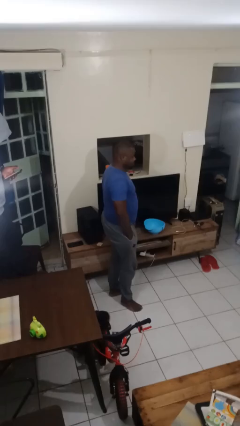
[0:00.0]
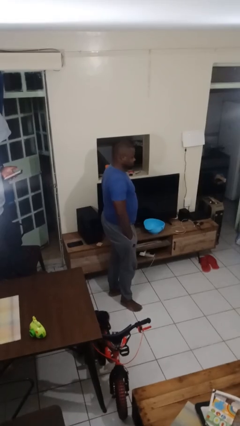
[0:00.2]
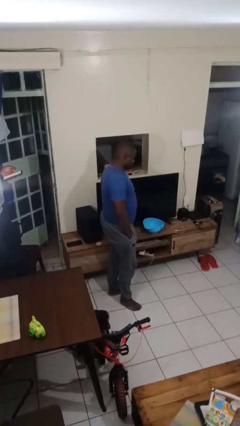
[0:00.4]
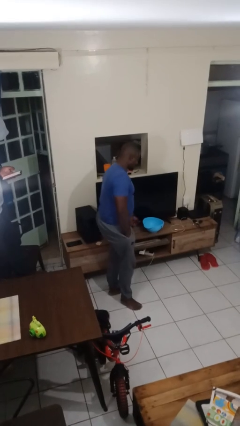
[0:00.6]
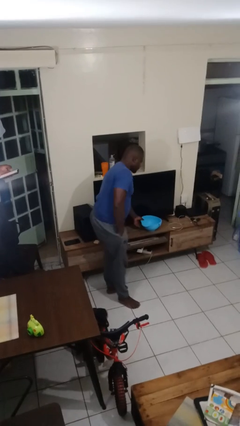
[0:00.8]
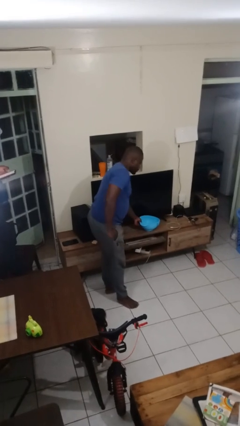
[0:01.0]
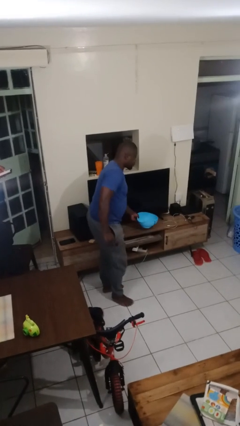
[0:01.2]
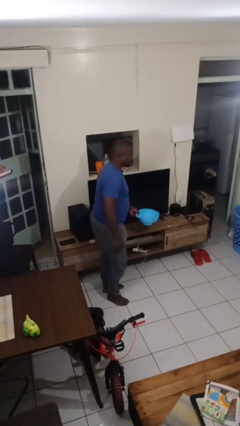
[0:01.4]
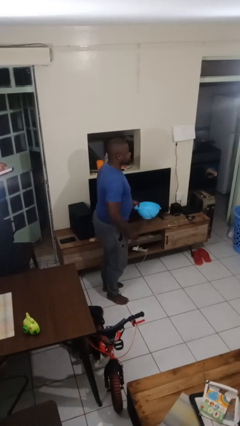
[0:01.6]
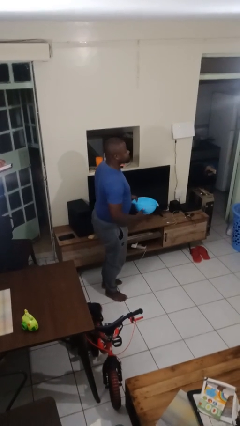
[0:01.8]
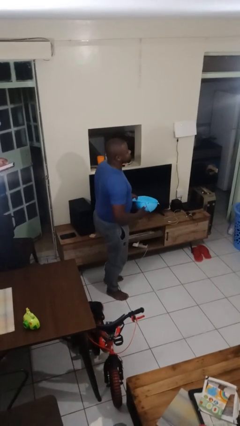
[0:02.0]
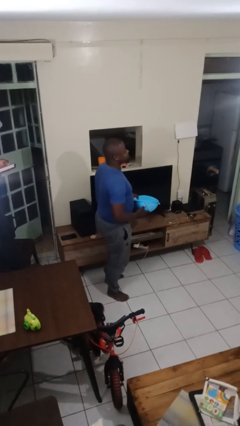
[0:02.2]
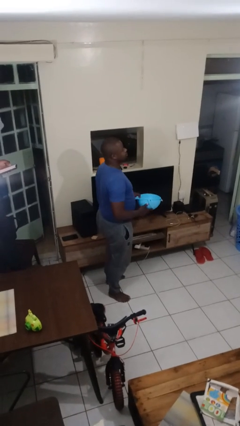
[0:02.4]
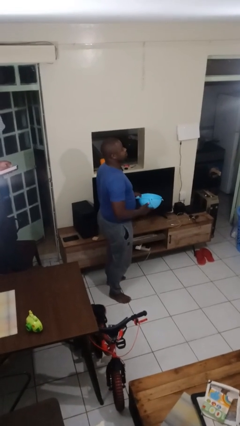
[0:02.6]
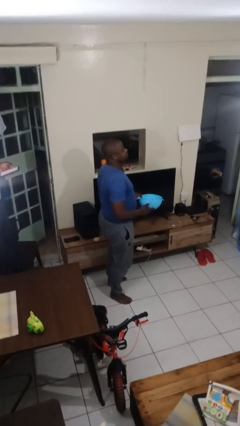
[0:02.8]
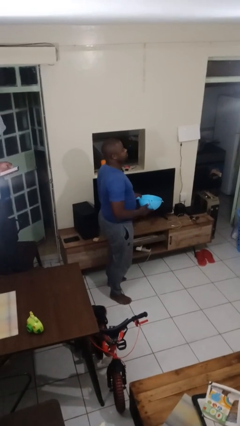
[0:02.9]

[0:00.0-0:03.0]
person picks up object from countertop

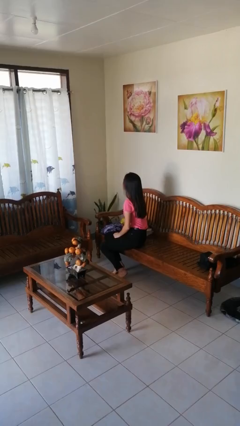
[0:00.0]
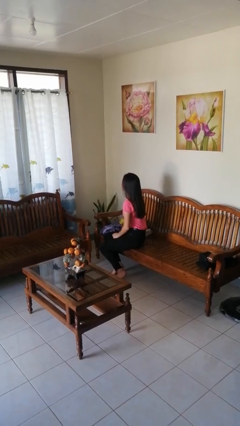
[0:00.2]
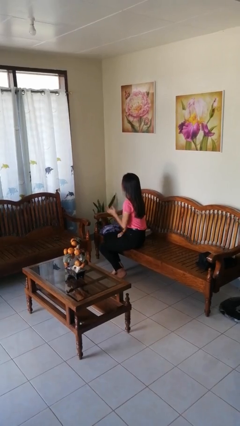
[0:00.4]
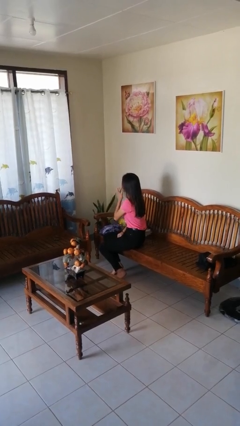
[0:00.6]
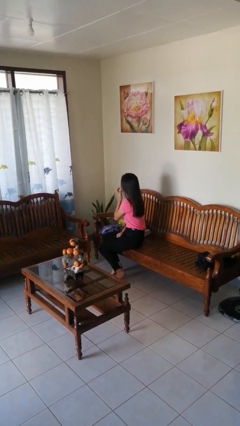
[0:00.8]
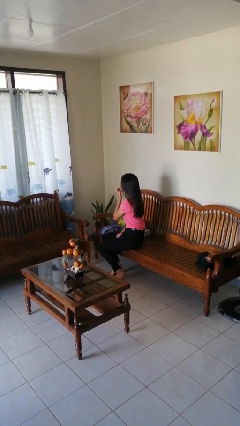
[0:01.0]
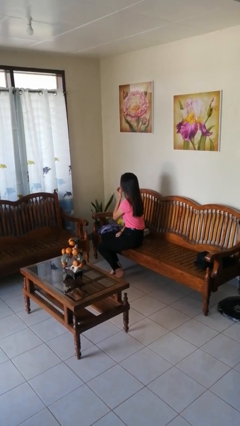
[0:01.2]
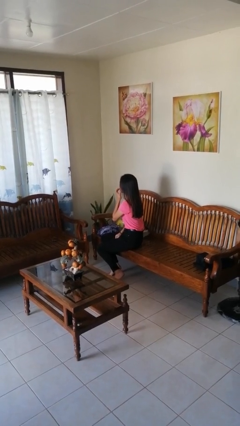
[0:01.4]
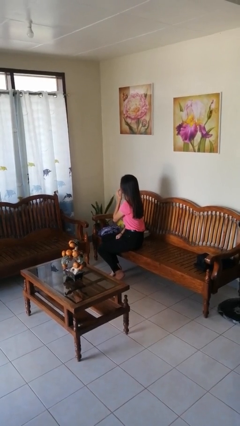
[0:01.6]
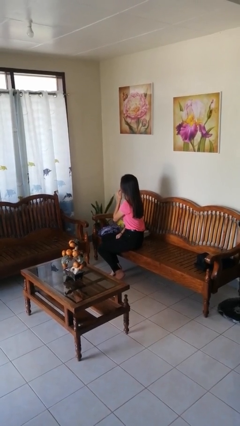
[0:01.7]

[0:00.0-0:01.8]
person licks fingers

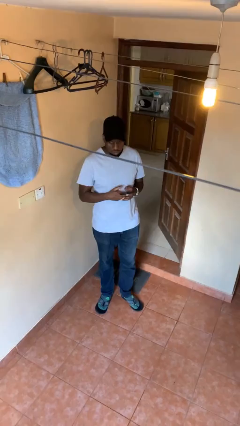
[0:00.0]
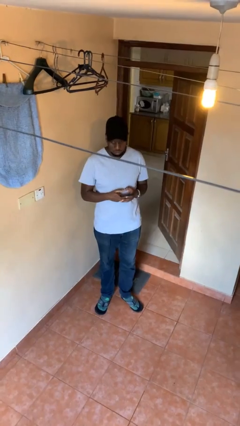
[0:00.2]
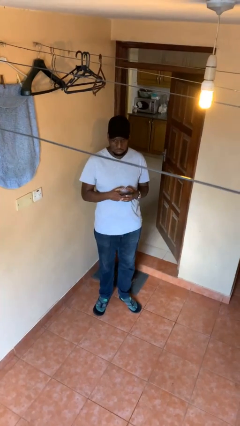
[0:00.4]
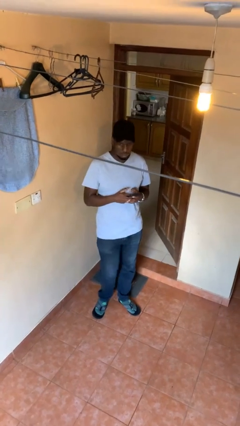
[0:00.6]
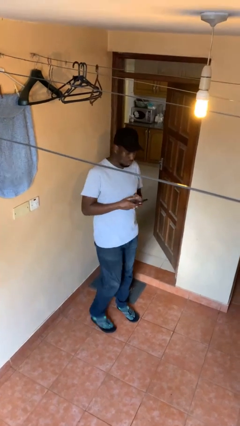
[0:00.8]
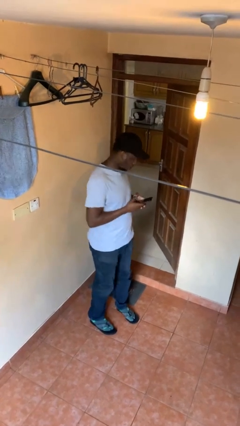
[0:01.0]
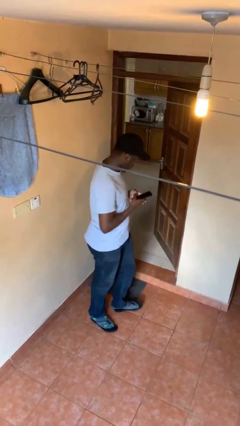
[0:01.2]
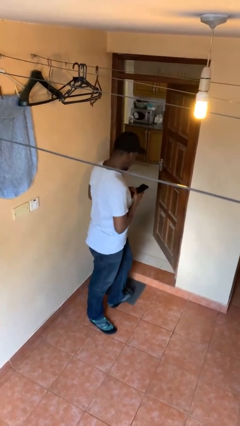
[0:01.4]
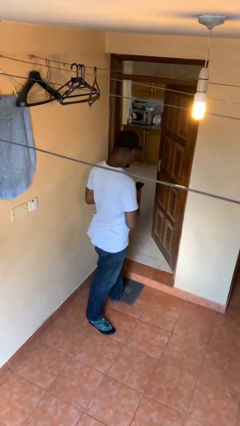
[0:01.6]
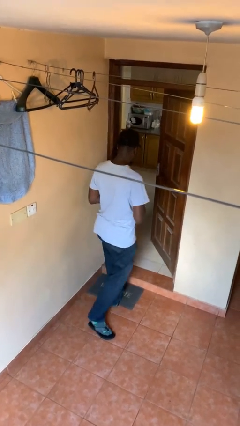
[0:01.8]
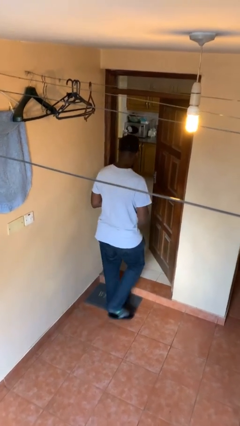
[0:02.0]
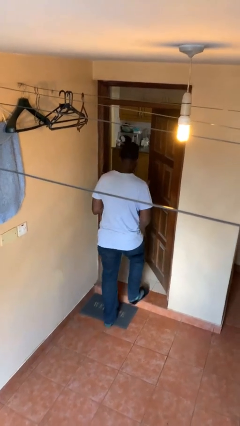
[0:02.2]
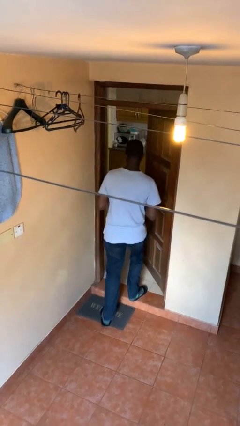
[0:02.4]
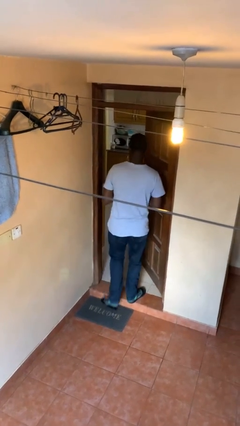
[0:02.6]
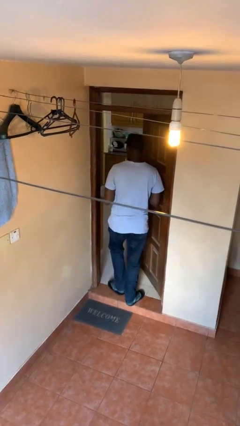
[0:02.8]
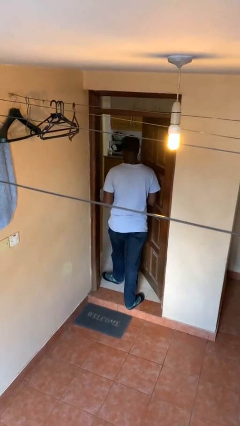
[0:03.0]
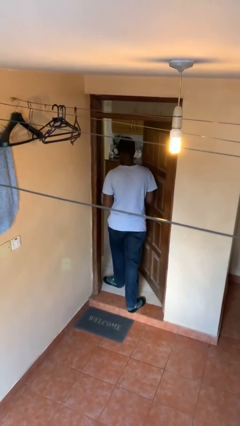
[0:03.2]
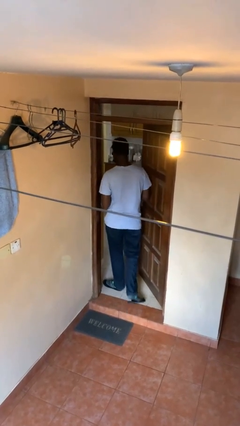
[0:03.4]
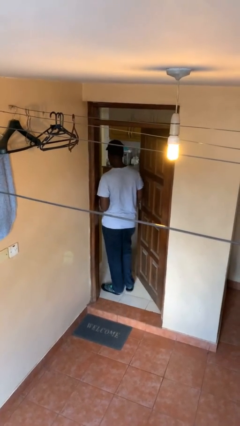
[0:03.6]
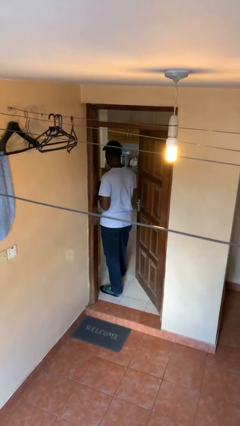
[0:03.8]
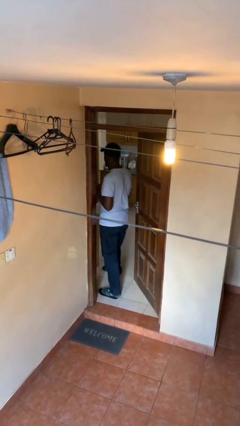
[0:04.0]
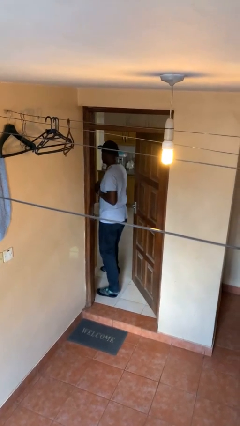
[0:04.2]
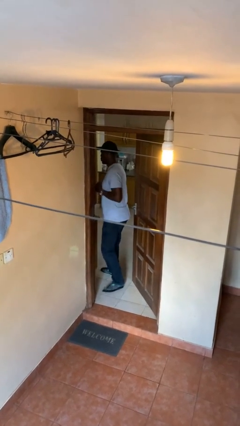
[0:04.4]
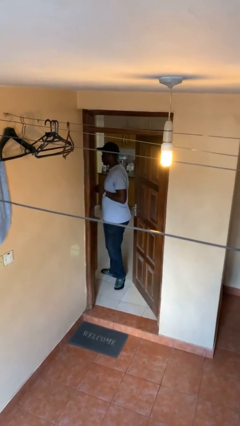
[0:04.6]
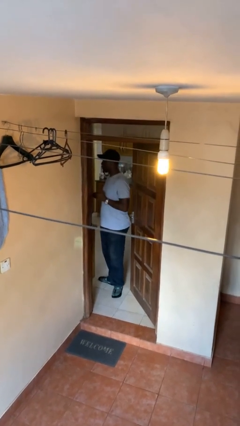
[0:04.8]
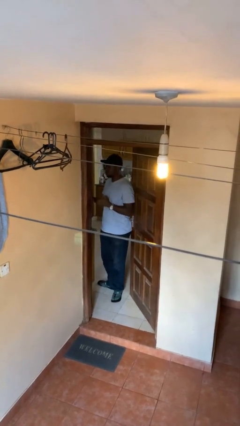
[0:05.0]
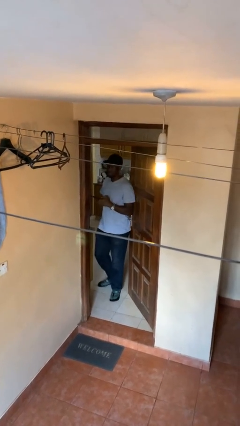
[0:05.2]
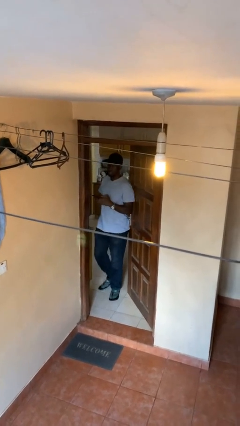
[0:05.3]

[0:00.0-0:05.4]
person exits scene through structure

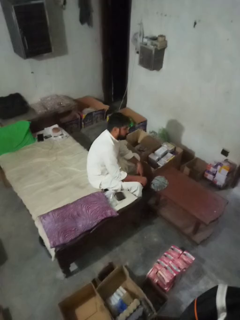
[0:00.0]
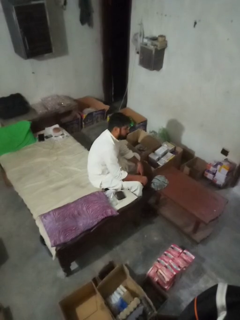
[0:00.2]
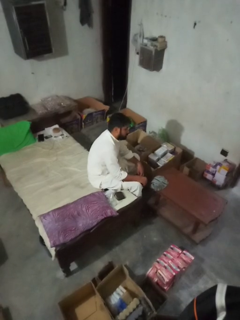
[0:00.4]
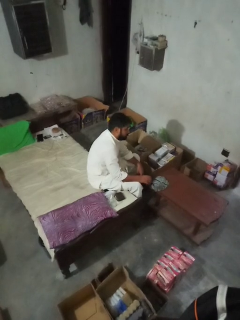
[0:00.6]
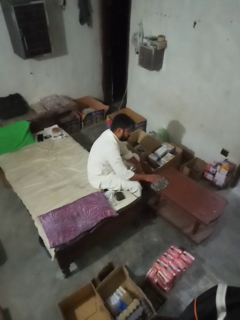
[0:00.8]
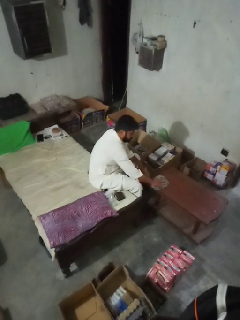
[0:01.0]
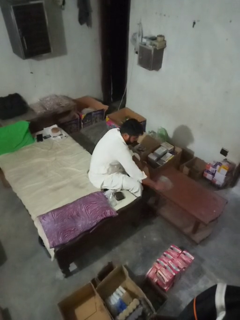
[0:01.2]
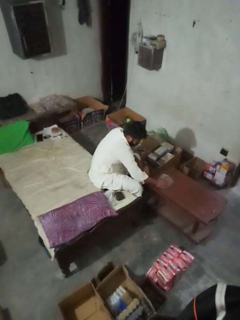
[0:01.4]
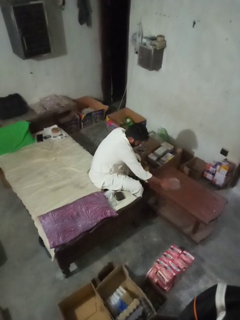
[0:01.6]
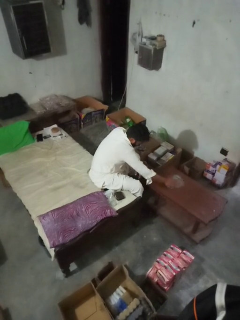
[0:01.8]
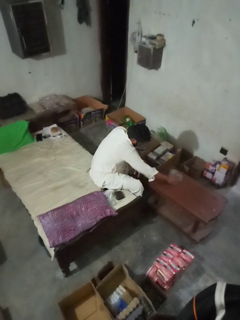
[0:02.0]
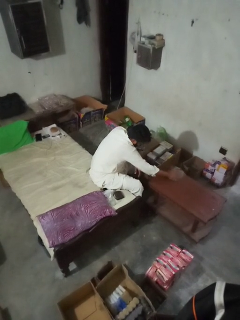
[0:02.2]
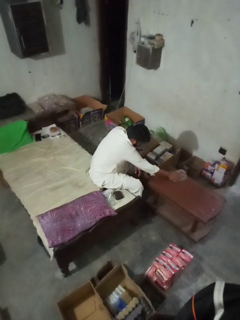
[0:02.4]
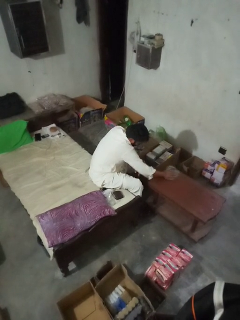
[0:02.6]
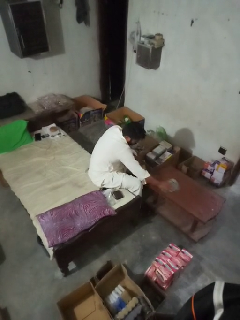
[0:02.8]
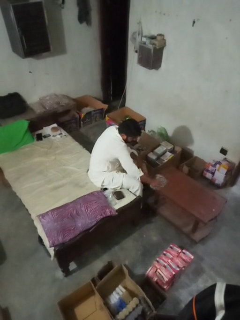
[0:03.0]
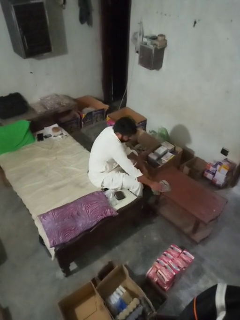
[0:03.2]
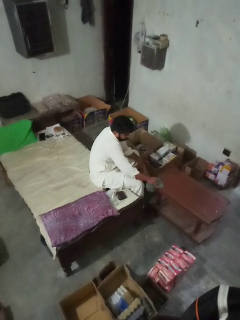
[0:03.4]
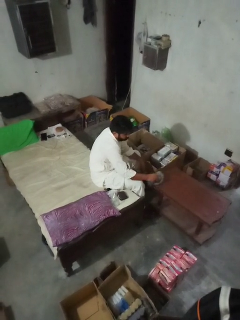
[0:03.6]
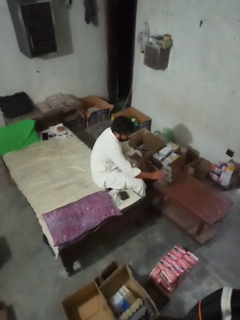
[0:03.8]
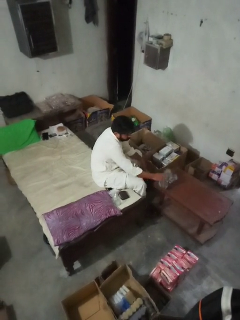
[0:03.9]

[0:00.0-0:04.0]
person cleans table with rag

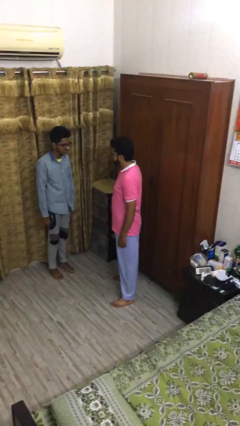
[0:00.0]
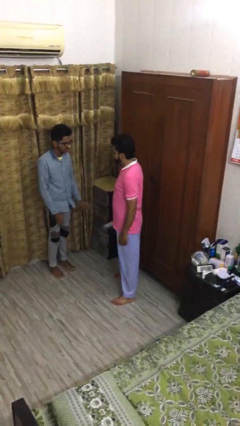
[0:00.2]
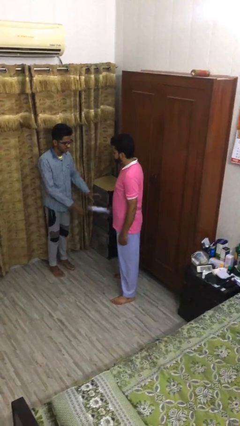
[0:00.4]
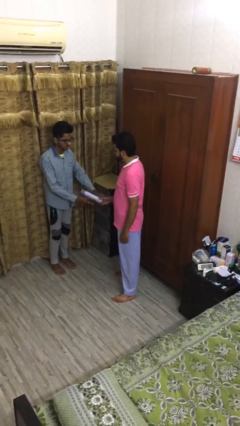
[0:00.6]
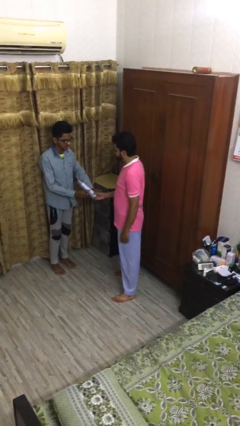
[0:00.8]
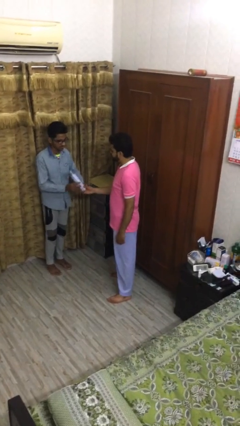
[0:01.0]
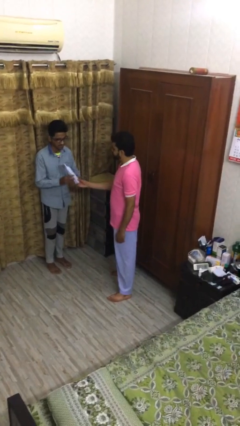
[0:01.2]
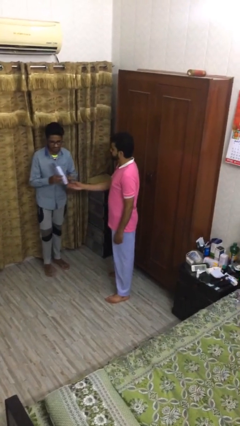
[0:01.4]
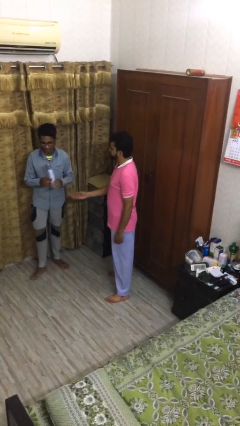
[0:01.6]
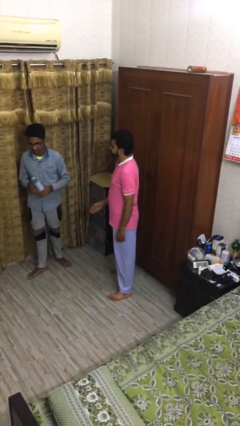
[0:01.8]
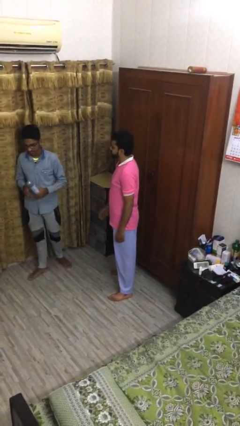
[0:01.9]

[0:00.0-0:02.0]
person transfers object to person

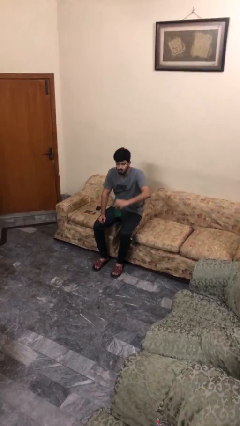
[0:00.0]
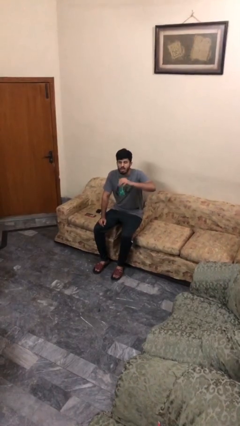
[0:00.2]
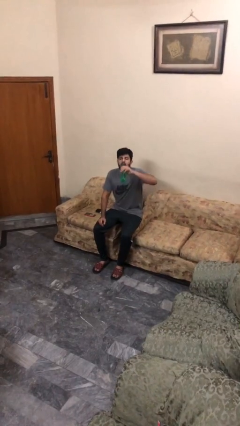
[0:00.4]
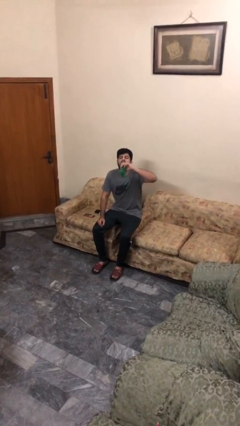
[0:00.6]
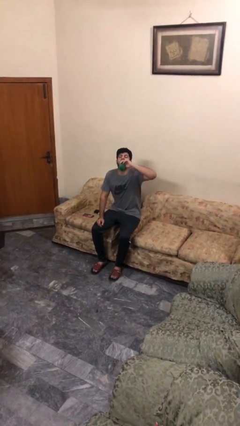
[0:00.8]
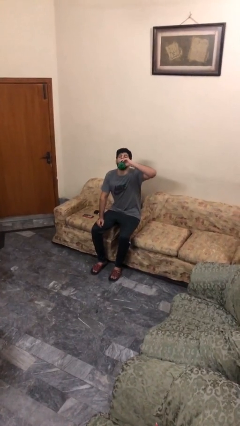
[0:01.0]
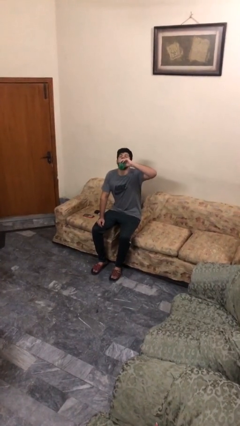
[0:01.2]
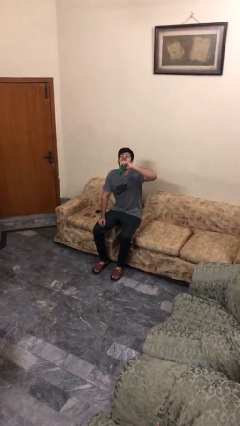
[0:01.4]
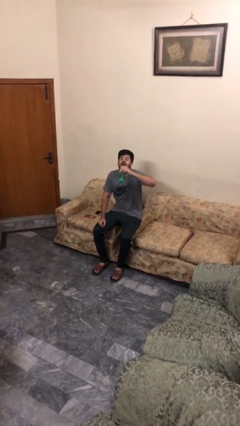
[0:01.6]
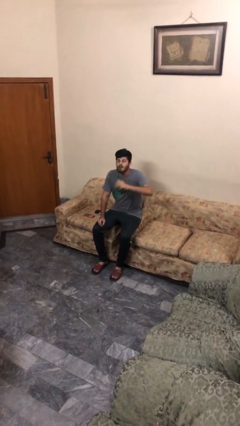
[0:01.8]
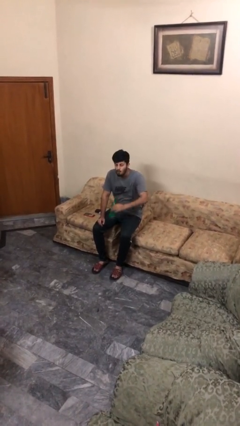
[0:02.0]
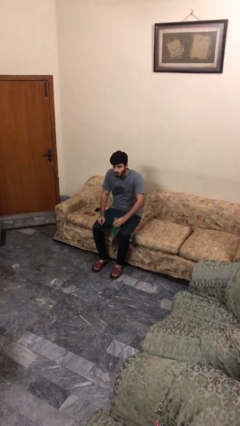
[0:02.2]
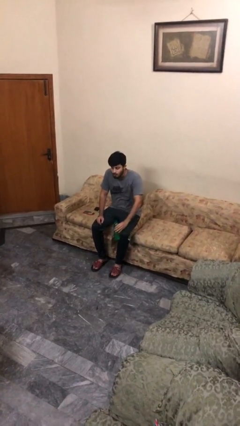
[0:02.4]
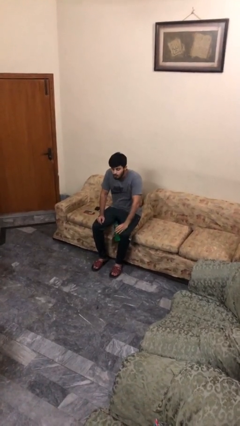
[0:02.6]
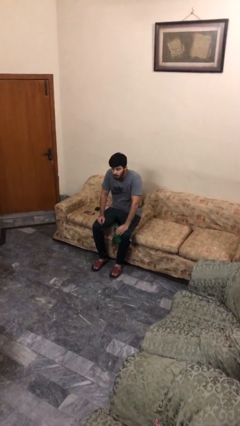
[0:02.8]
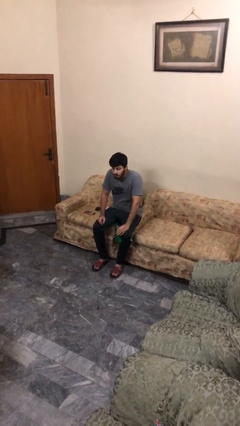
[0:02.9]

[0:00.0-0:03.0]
person drinks from bottle
